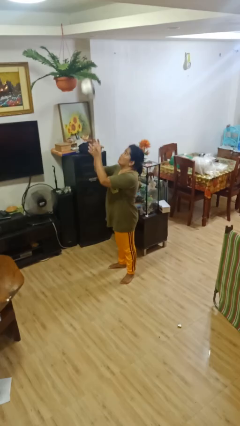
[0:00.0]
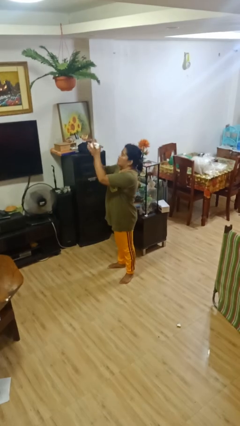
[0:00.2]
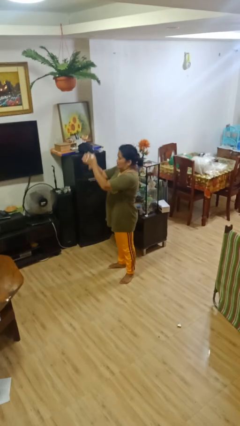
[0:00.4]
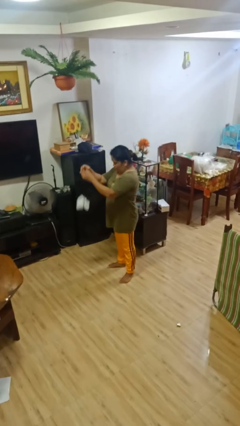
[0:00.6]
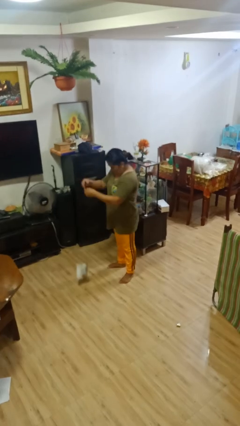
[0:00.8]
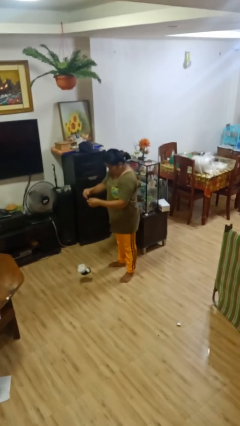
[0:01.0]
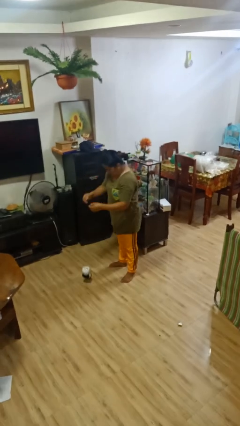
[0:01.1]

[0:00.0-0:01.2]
person catches dropped object

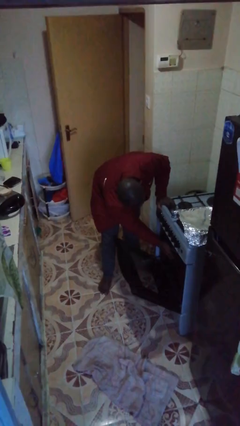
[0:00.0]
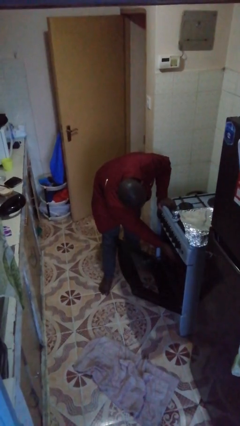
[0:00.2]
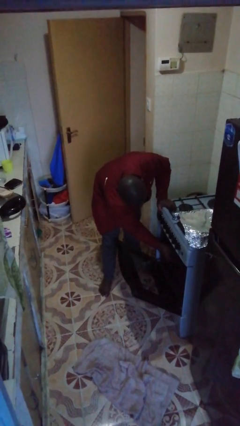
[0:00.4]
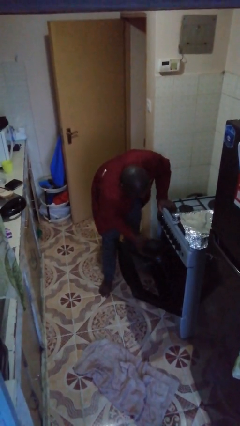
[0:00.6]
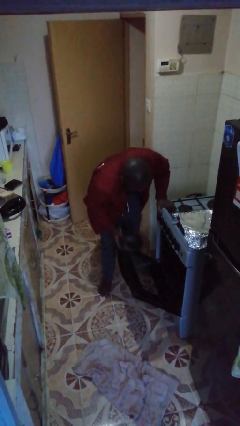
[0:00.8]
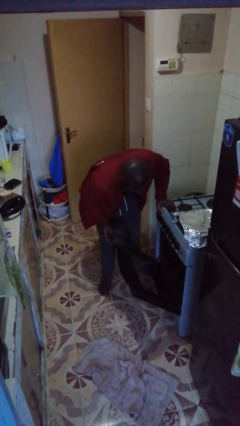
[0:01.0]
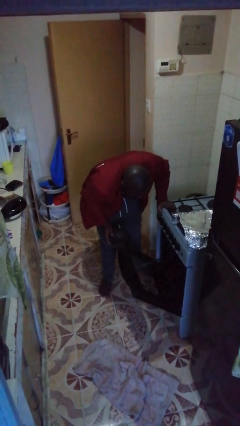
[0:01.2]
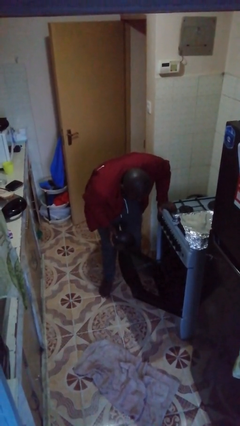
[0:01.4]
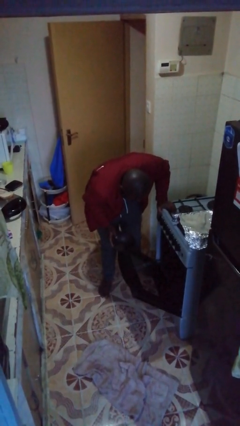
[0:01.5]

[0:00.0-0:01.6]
person takes object from oven

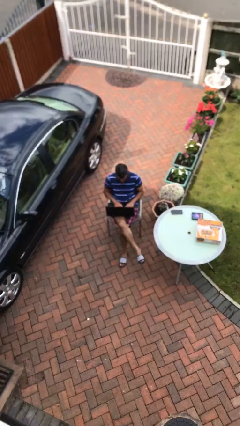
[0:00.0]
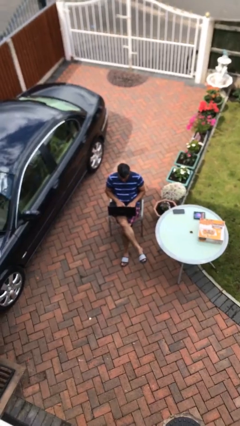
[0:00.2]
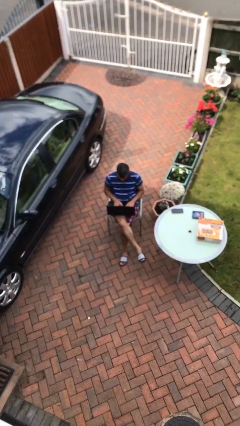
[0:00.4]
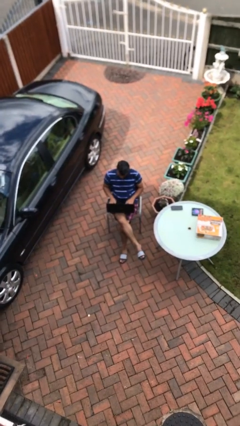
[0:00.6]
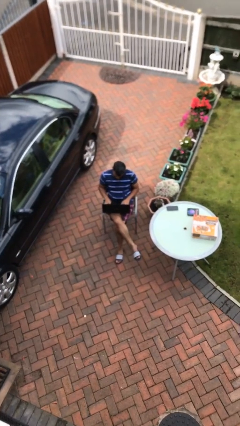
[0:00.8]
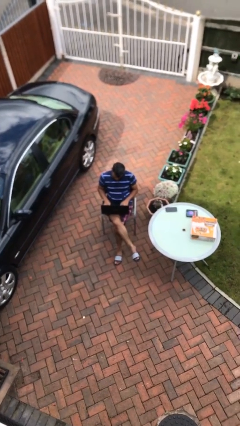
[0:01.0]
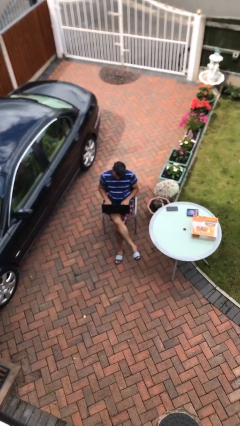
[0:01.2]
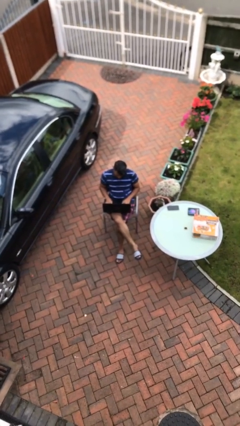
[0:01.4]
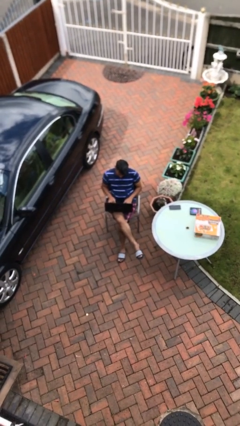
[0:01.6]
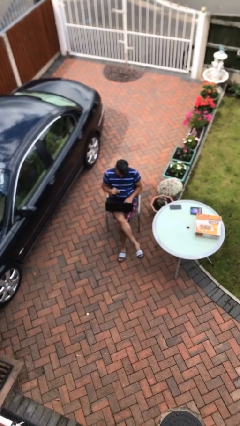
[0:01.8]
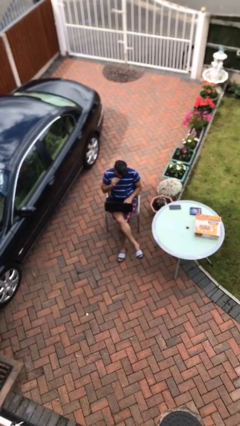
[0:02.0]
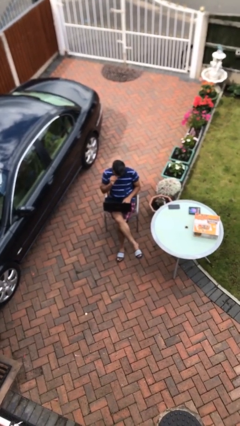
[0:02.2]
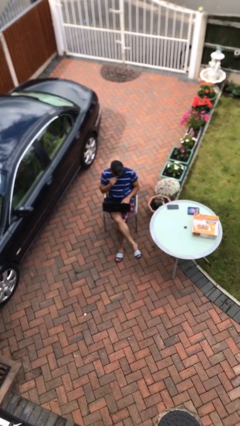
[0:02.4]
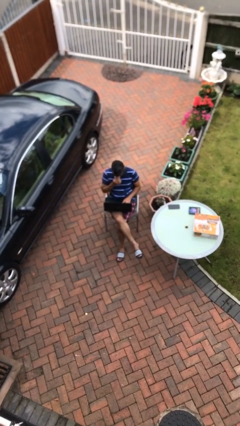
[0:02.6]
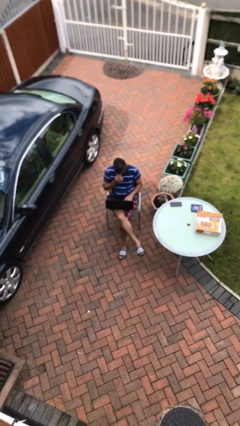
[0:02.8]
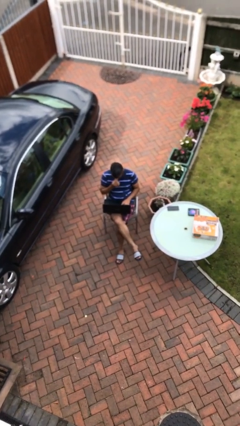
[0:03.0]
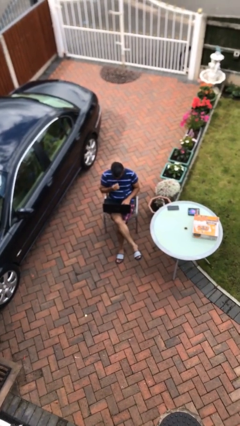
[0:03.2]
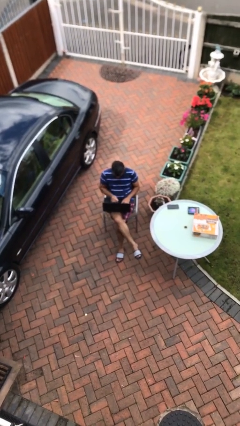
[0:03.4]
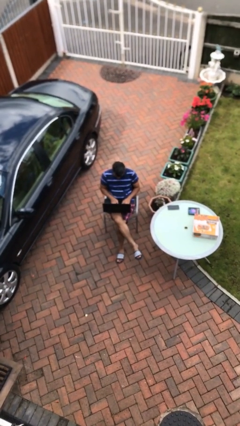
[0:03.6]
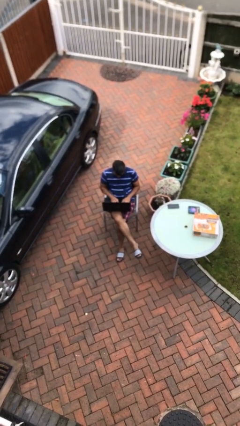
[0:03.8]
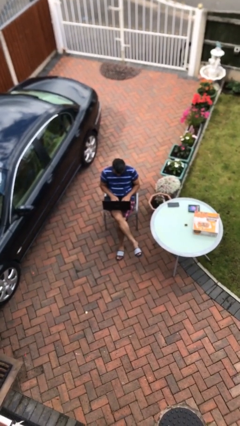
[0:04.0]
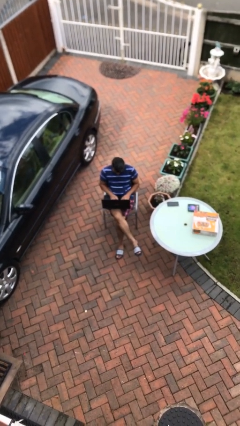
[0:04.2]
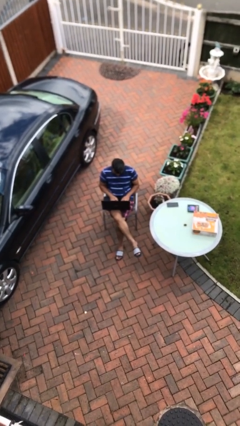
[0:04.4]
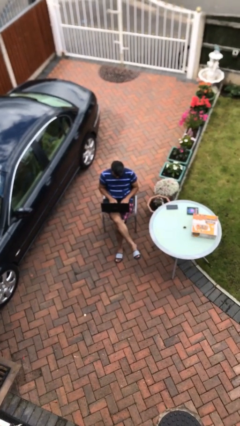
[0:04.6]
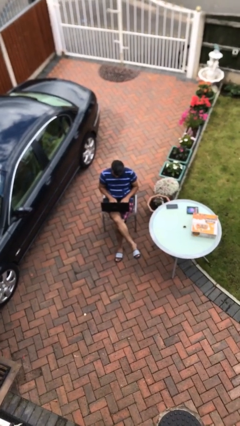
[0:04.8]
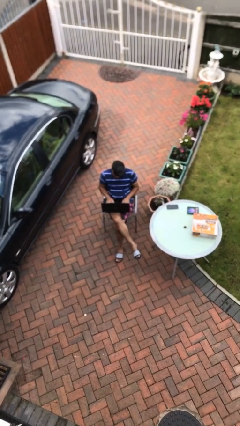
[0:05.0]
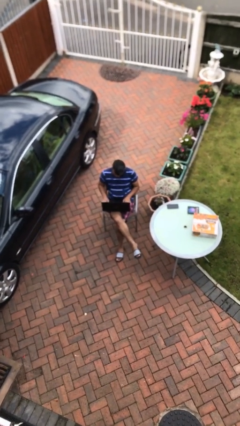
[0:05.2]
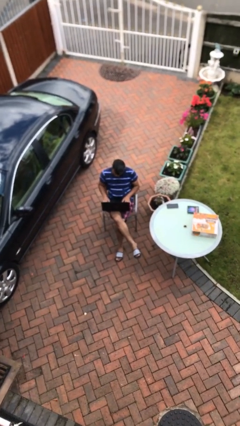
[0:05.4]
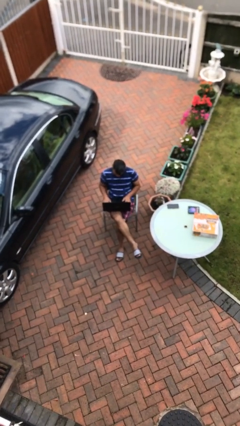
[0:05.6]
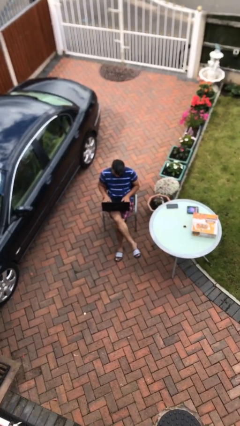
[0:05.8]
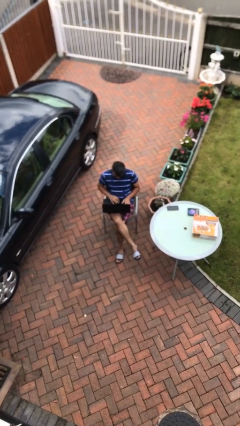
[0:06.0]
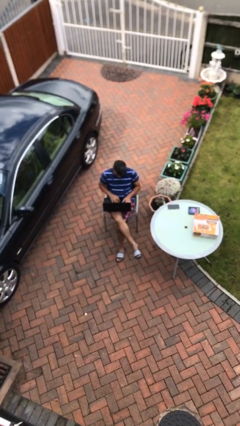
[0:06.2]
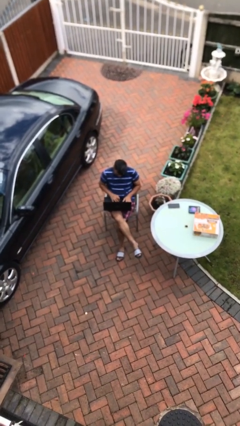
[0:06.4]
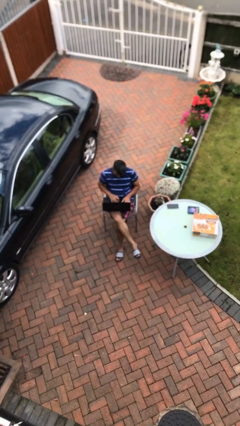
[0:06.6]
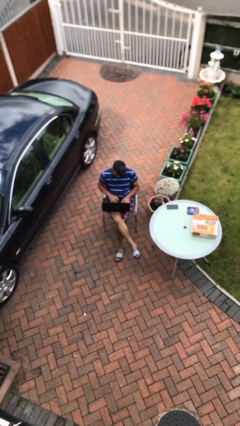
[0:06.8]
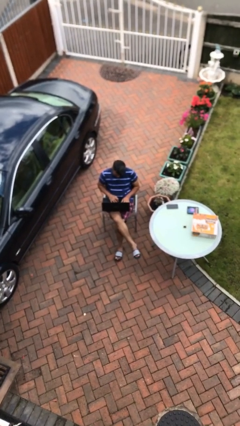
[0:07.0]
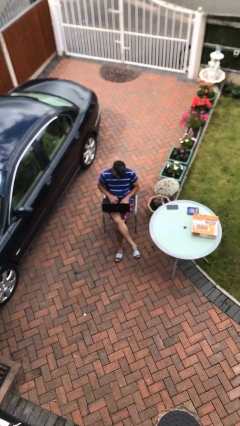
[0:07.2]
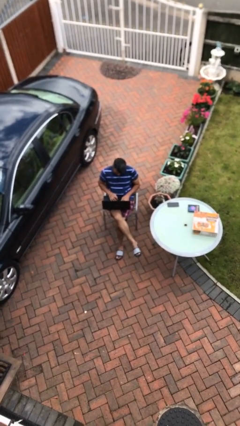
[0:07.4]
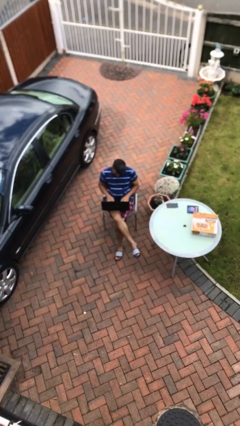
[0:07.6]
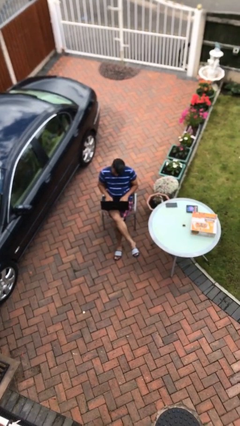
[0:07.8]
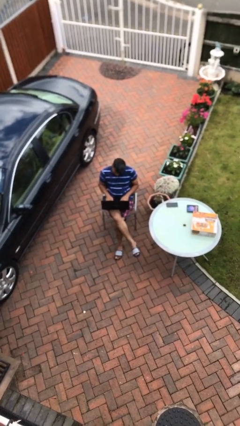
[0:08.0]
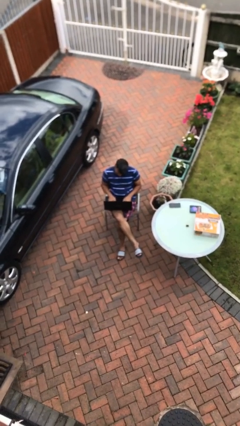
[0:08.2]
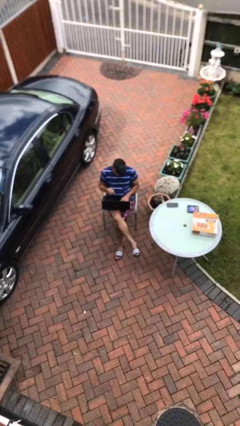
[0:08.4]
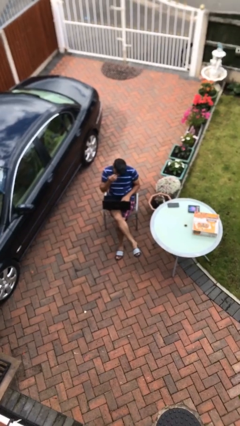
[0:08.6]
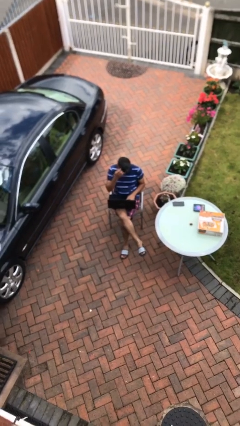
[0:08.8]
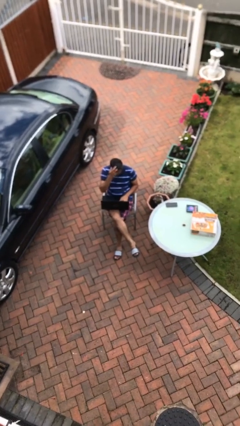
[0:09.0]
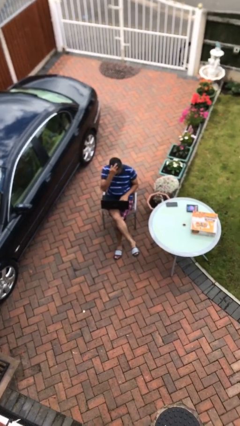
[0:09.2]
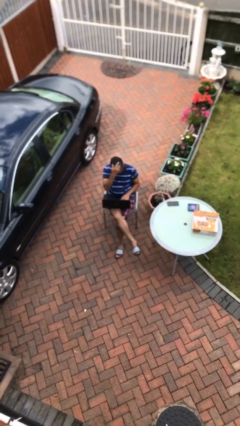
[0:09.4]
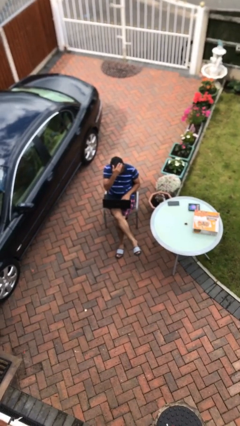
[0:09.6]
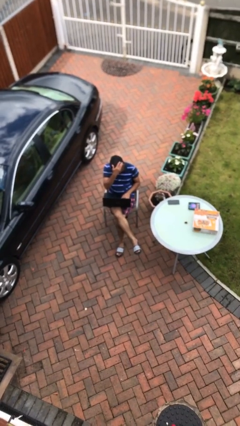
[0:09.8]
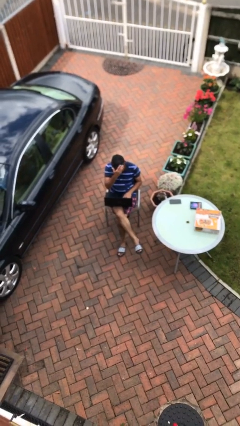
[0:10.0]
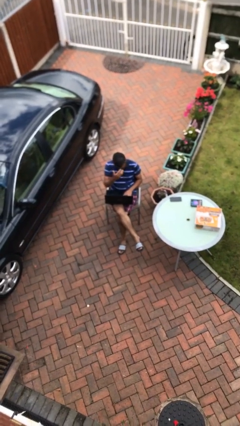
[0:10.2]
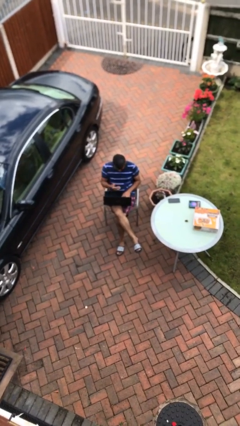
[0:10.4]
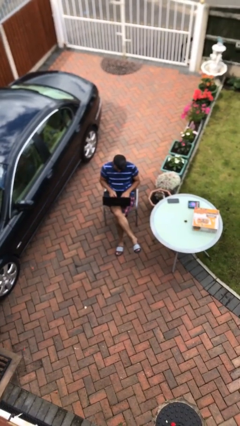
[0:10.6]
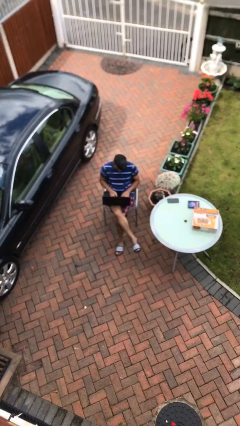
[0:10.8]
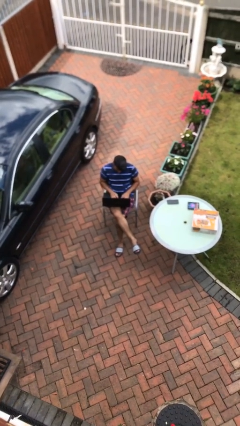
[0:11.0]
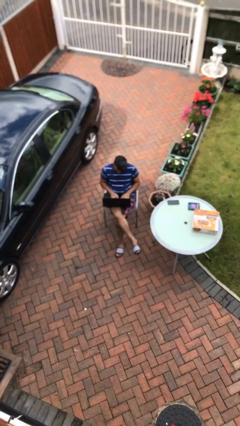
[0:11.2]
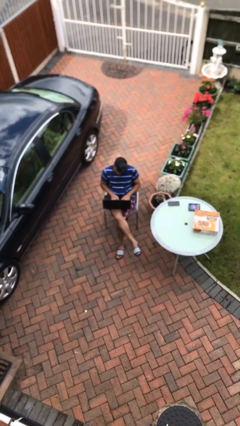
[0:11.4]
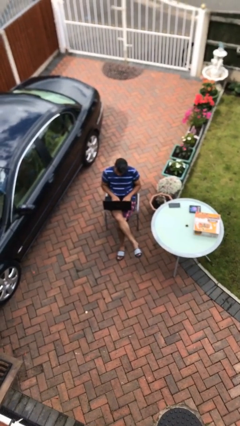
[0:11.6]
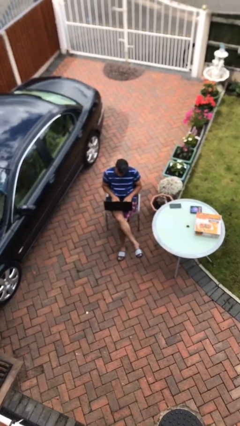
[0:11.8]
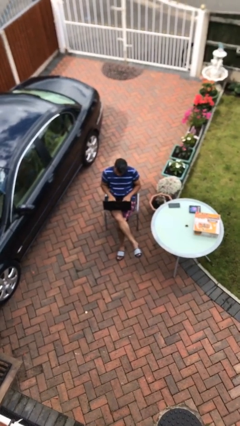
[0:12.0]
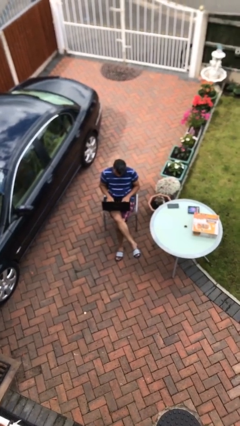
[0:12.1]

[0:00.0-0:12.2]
person interacts with laptop

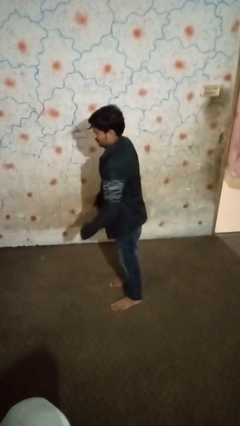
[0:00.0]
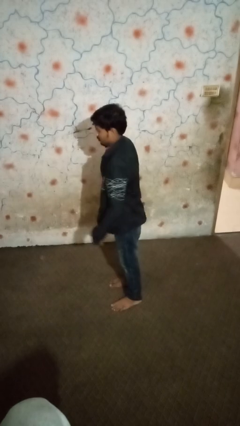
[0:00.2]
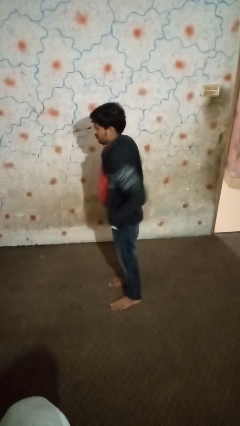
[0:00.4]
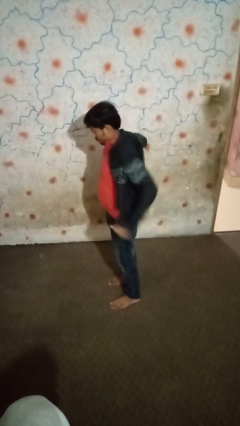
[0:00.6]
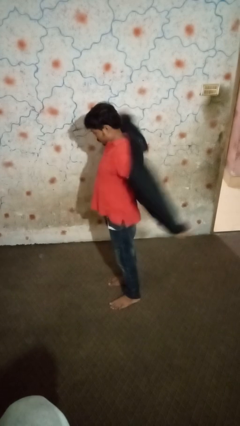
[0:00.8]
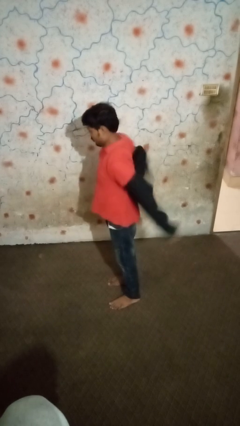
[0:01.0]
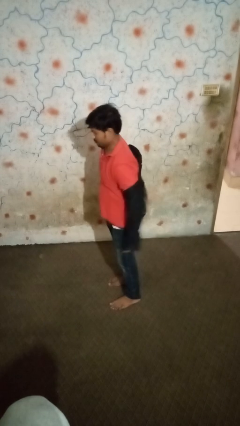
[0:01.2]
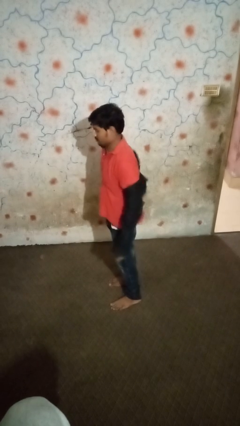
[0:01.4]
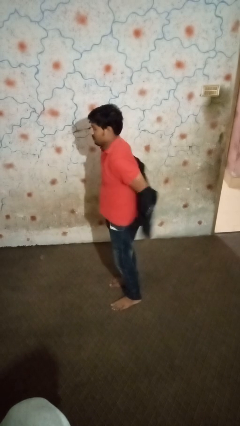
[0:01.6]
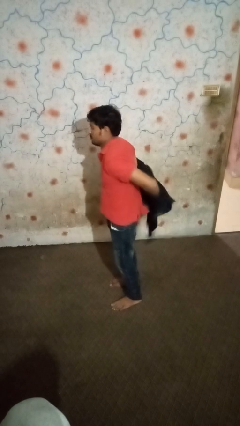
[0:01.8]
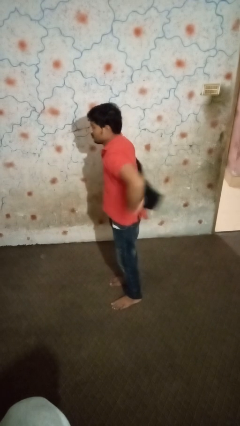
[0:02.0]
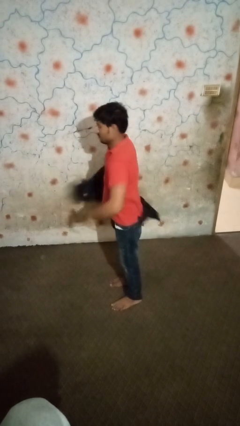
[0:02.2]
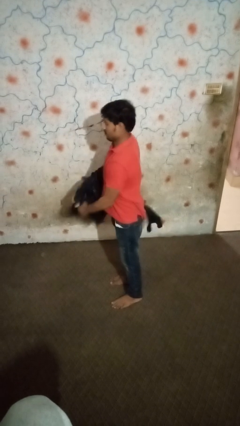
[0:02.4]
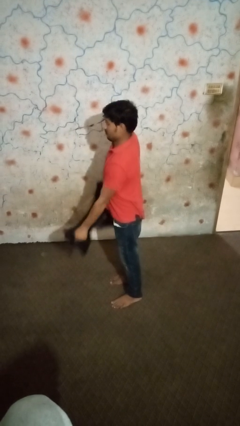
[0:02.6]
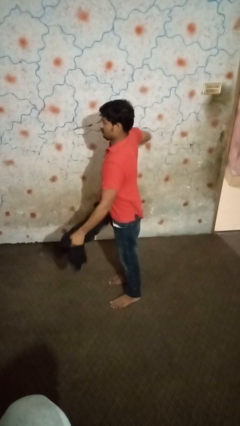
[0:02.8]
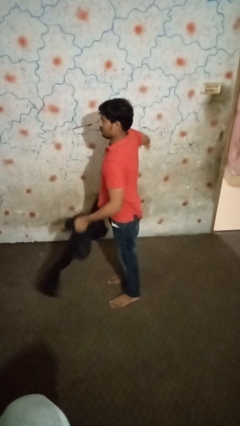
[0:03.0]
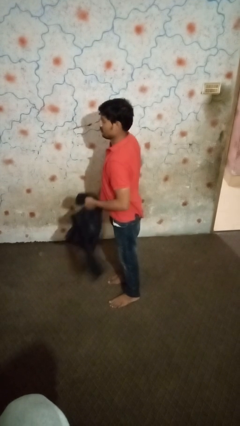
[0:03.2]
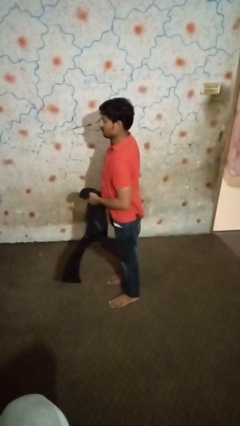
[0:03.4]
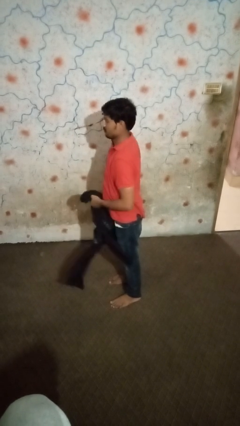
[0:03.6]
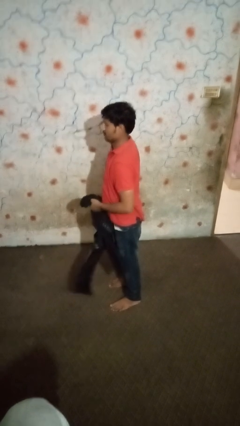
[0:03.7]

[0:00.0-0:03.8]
person takes off shirt
